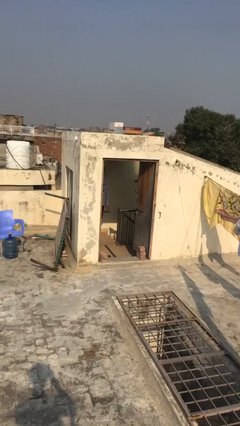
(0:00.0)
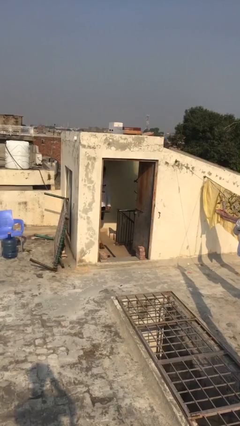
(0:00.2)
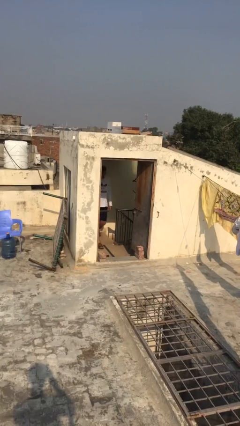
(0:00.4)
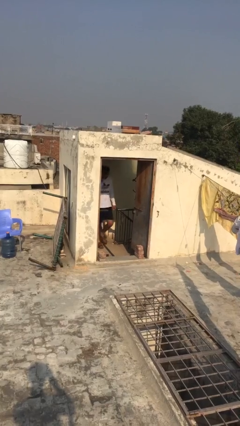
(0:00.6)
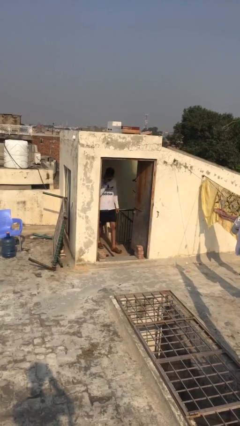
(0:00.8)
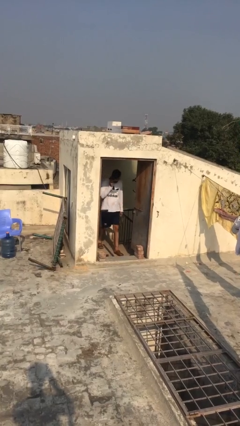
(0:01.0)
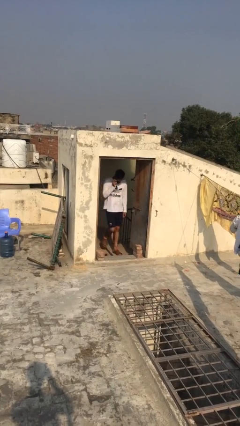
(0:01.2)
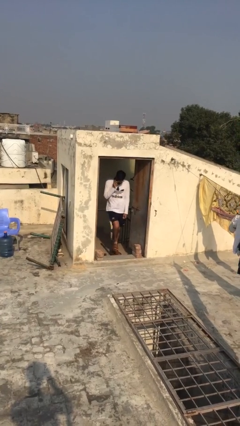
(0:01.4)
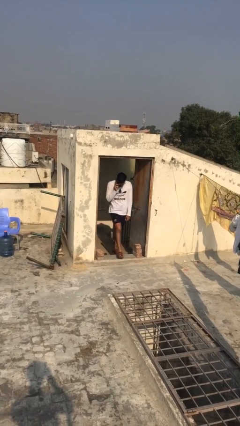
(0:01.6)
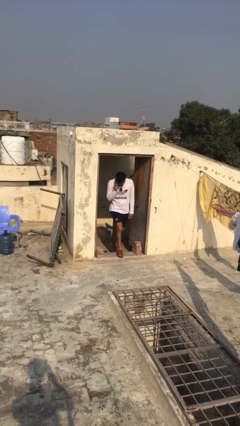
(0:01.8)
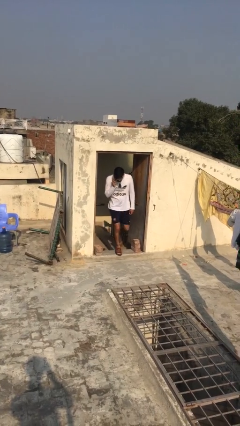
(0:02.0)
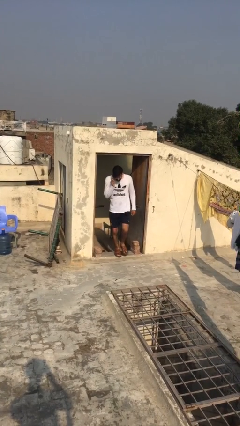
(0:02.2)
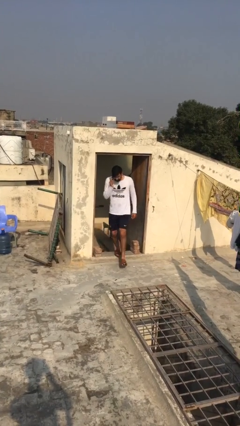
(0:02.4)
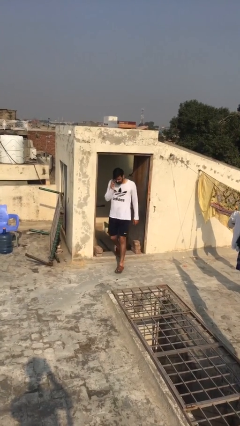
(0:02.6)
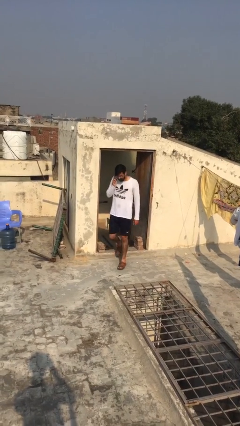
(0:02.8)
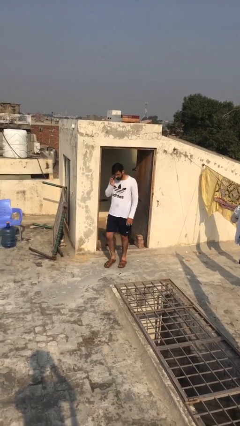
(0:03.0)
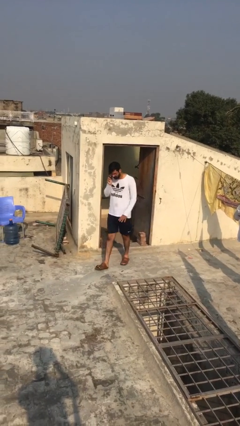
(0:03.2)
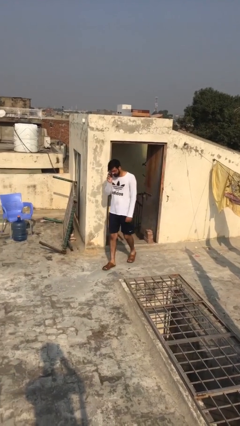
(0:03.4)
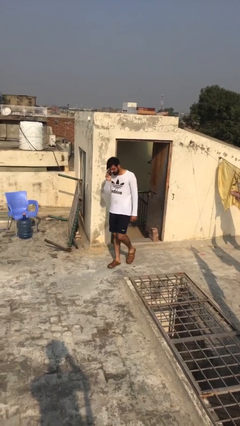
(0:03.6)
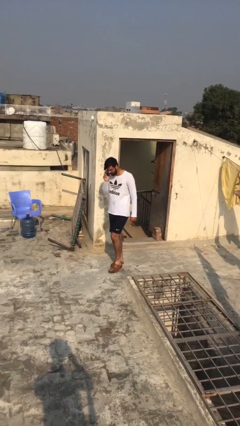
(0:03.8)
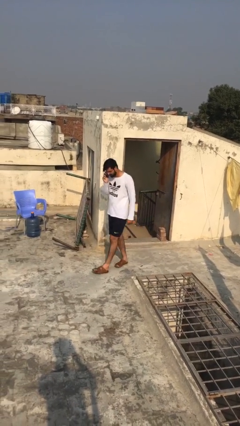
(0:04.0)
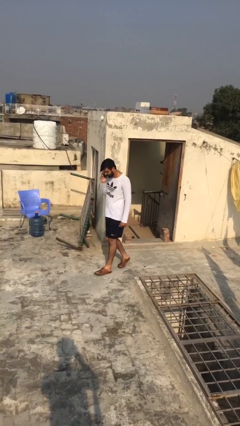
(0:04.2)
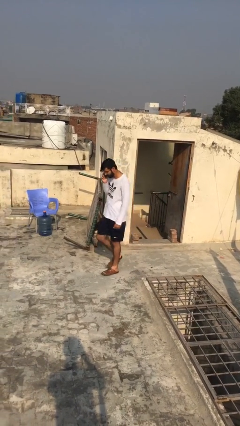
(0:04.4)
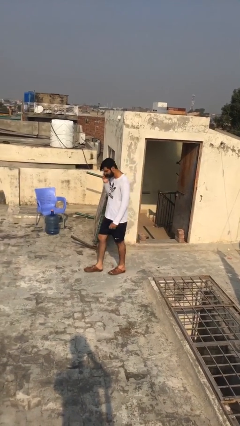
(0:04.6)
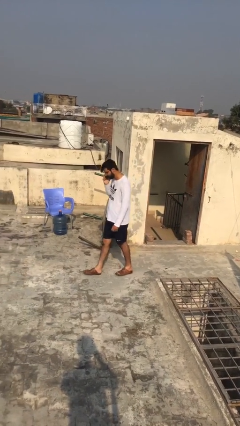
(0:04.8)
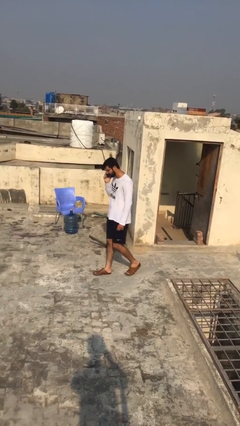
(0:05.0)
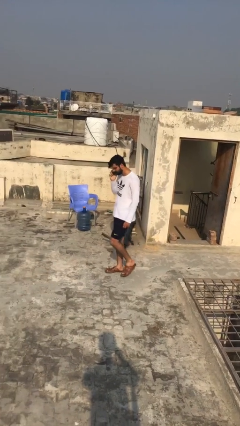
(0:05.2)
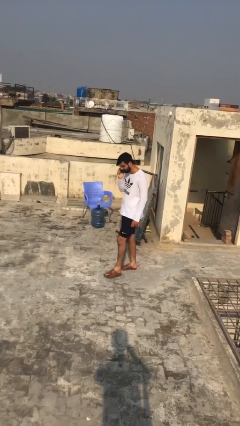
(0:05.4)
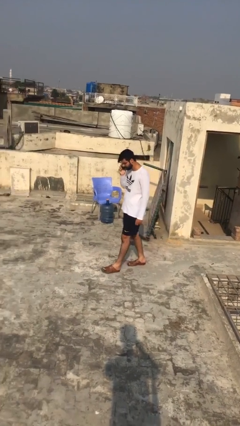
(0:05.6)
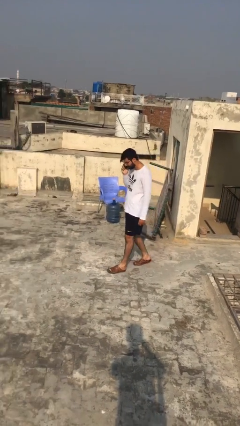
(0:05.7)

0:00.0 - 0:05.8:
person enters scene through structure

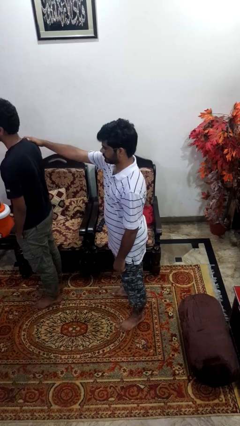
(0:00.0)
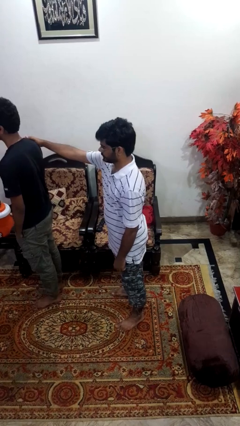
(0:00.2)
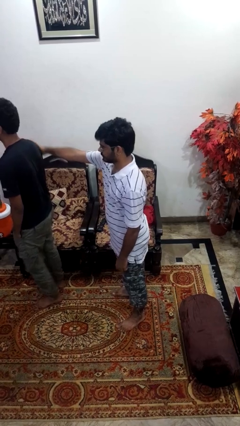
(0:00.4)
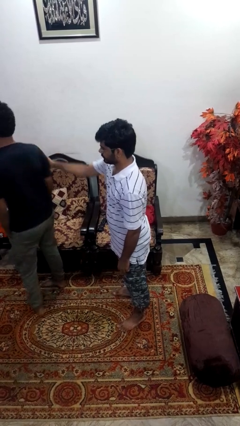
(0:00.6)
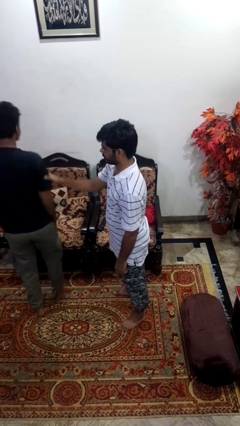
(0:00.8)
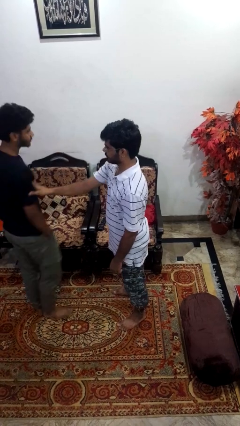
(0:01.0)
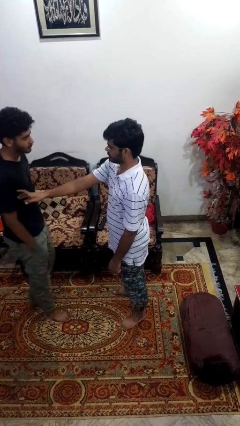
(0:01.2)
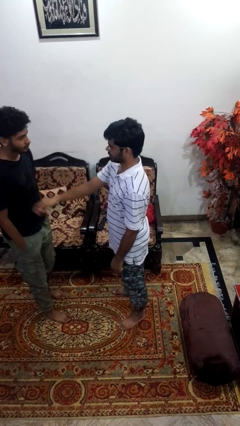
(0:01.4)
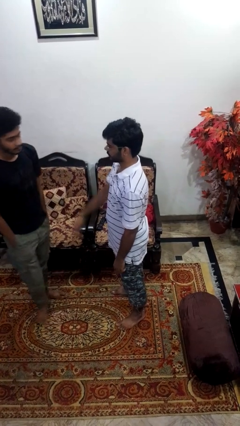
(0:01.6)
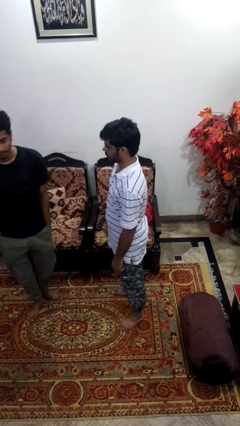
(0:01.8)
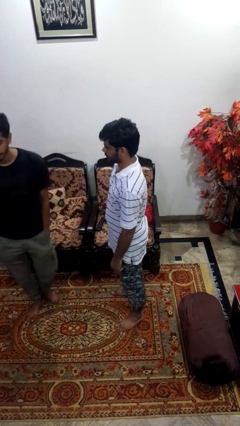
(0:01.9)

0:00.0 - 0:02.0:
person spins person around

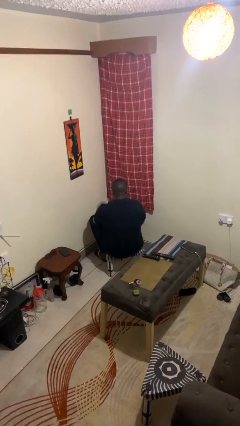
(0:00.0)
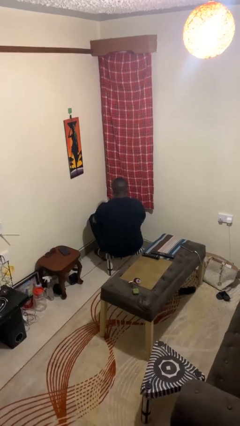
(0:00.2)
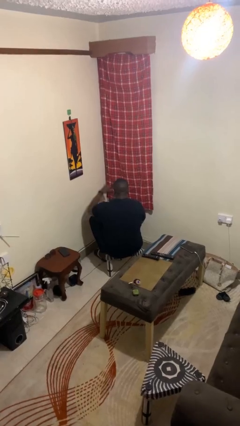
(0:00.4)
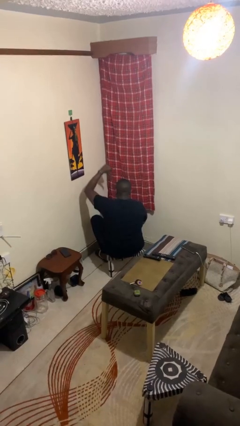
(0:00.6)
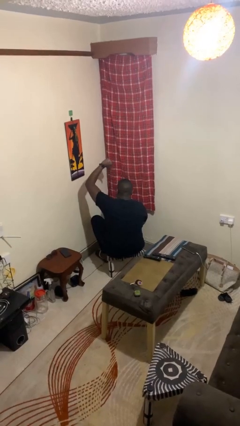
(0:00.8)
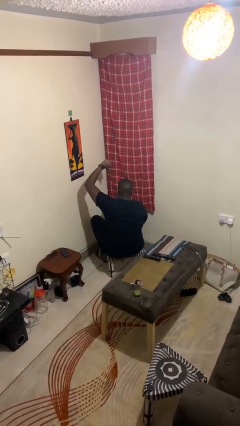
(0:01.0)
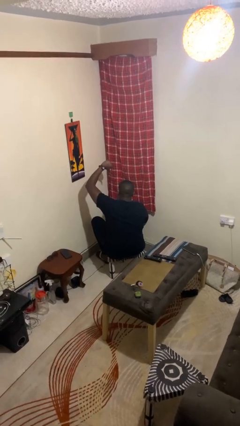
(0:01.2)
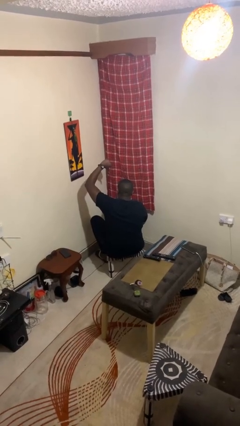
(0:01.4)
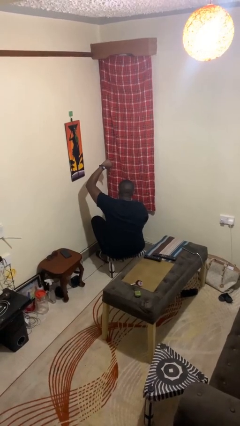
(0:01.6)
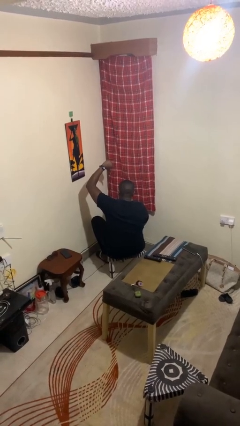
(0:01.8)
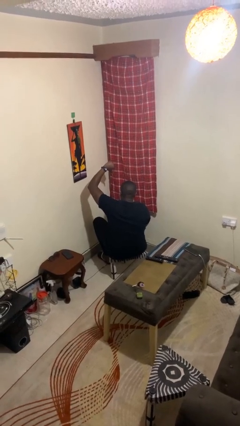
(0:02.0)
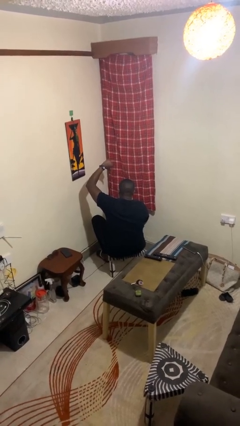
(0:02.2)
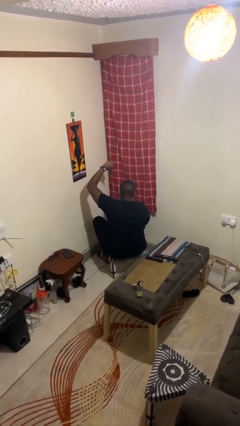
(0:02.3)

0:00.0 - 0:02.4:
person gestures thumbs down

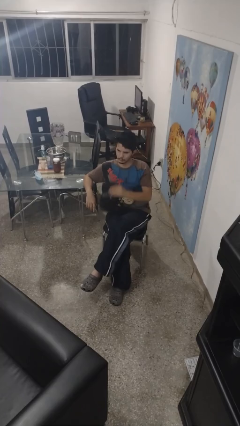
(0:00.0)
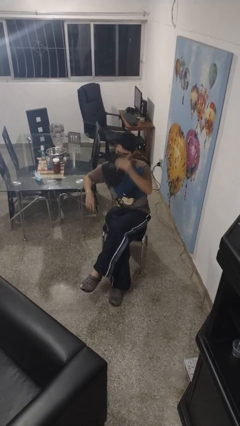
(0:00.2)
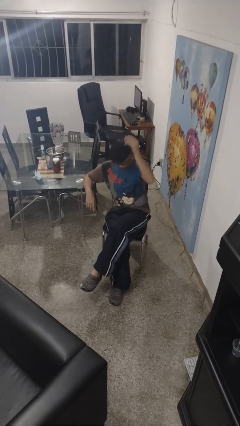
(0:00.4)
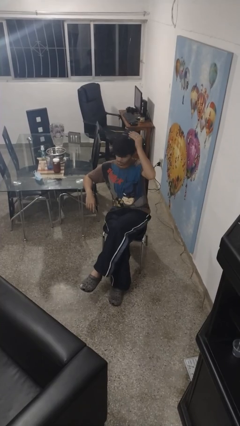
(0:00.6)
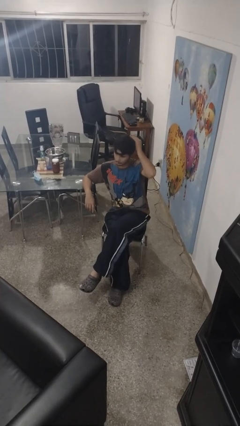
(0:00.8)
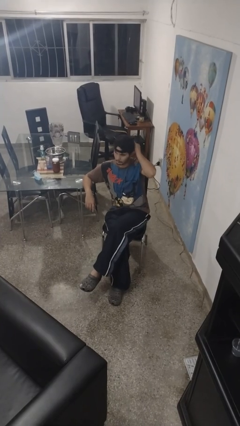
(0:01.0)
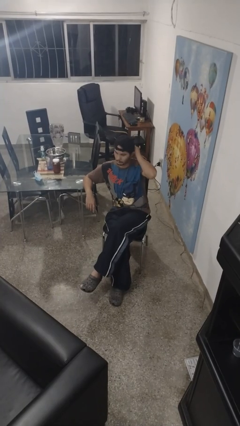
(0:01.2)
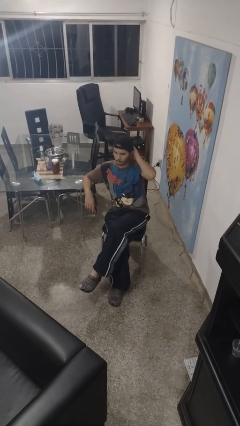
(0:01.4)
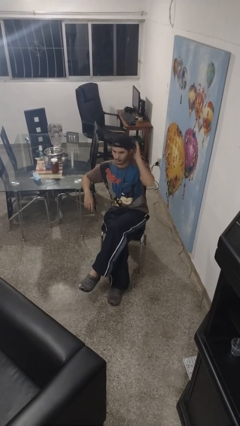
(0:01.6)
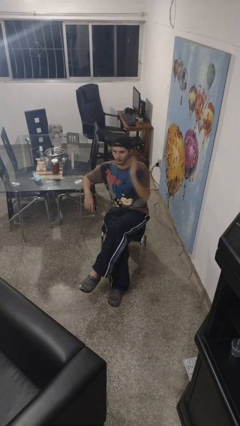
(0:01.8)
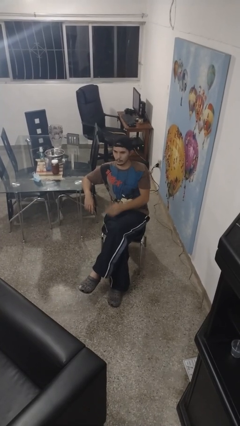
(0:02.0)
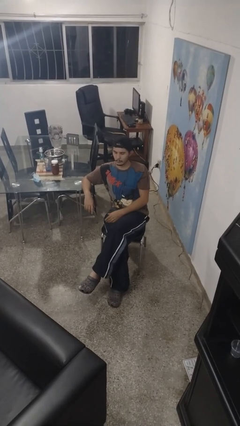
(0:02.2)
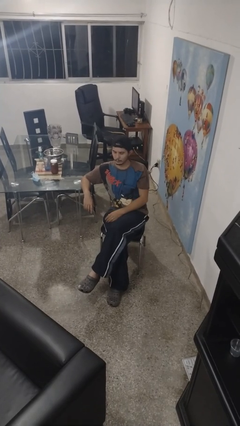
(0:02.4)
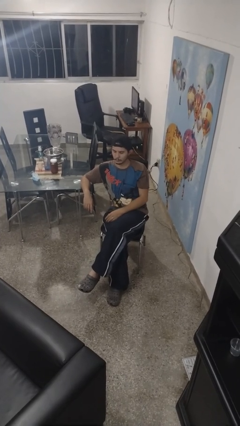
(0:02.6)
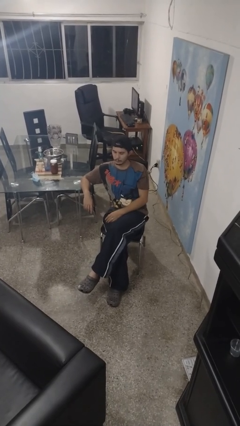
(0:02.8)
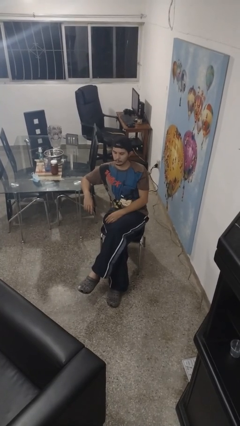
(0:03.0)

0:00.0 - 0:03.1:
person puts on hat

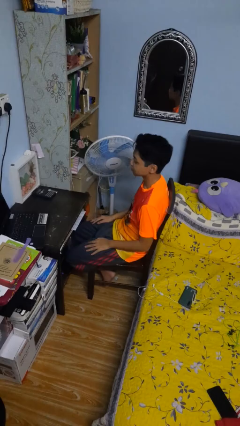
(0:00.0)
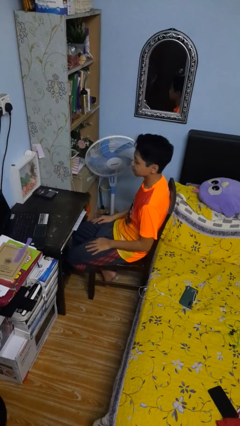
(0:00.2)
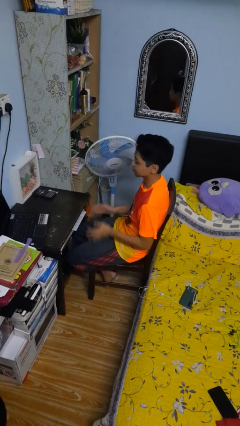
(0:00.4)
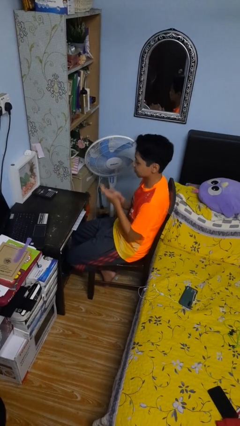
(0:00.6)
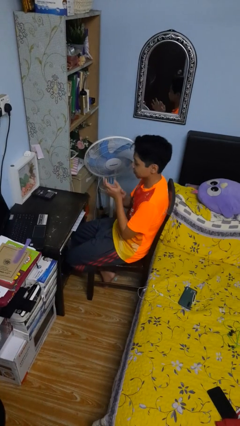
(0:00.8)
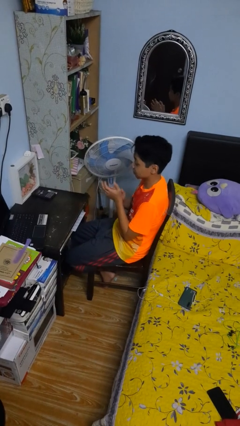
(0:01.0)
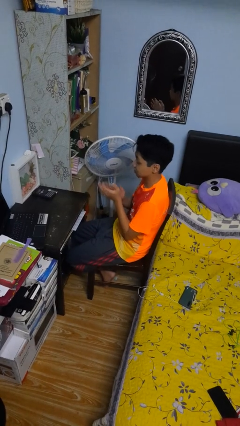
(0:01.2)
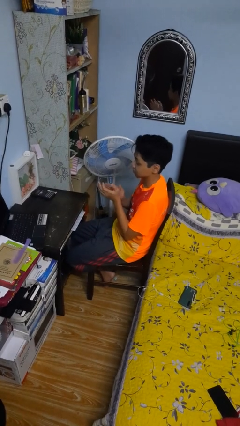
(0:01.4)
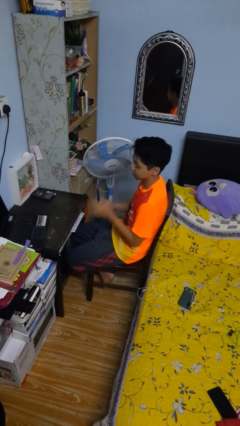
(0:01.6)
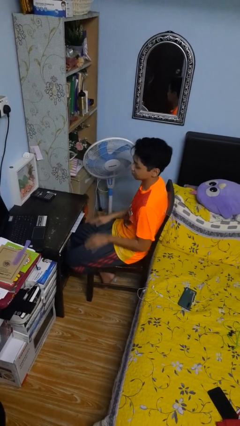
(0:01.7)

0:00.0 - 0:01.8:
person claps hands

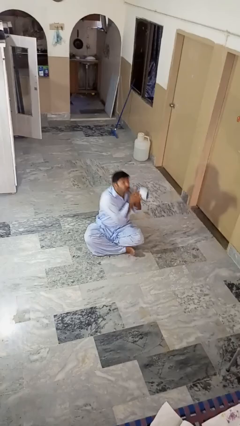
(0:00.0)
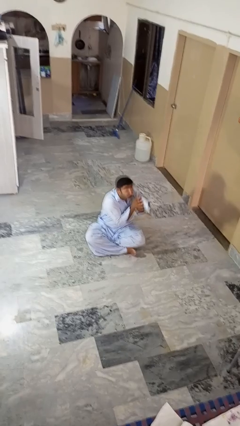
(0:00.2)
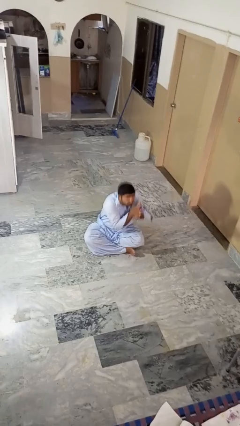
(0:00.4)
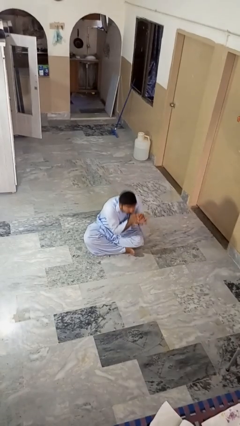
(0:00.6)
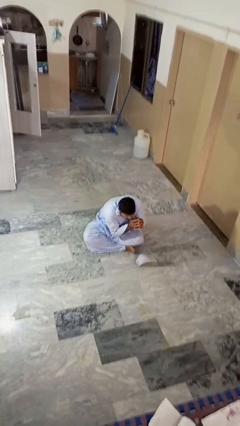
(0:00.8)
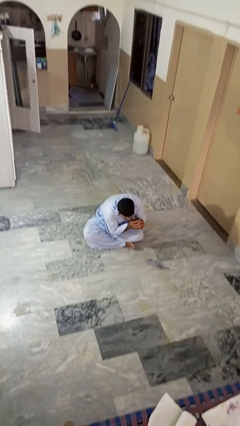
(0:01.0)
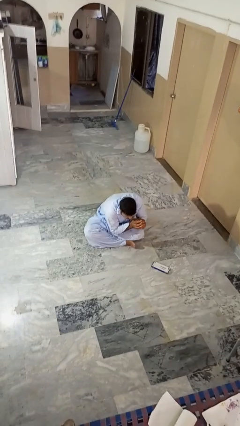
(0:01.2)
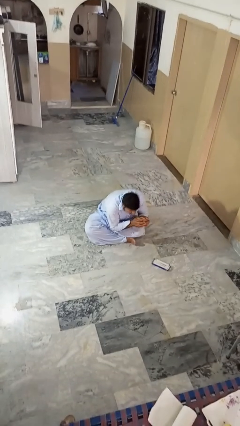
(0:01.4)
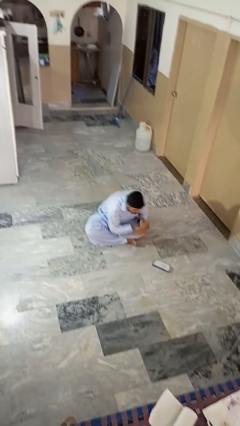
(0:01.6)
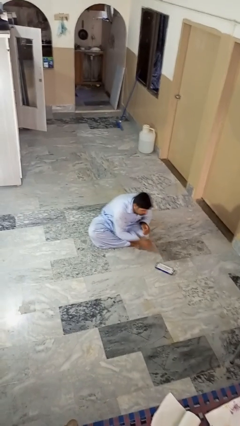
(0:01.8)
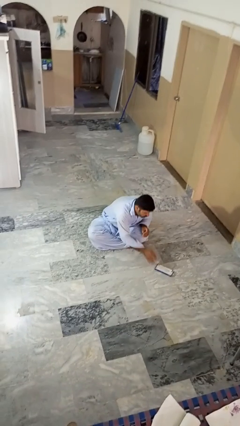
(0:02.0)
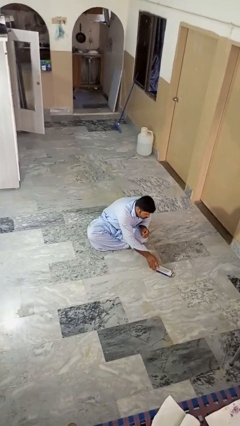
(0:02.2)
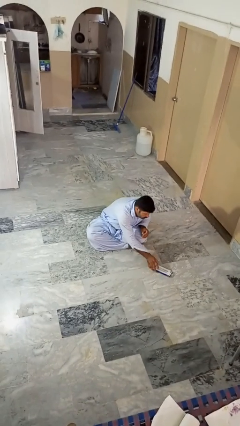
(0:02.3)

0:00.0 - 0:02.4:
person catches dropped object
